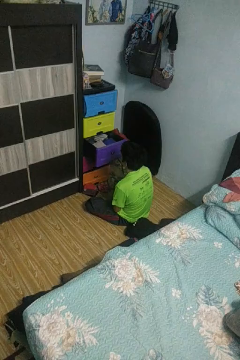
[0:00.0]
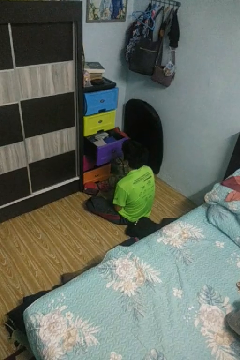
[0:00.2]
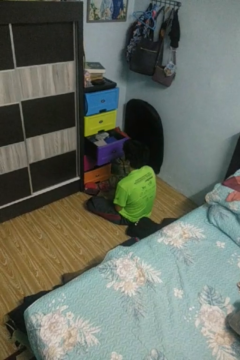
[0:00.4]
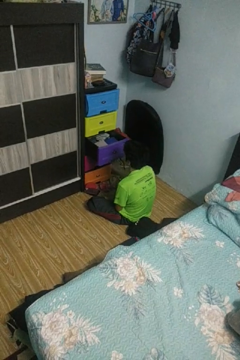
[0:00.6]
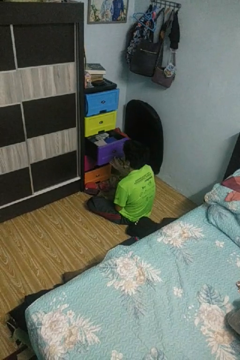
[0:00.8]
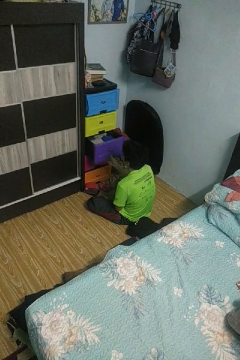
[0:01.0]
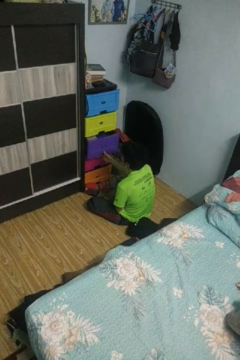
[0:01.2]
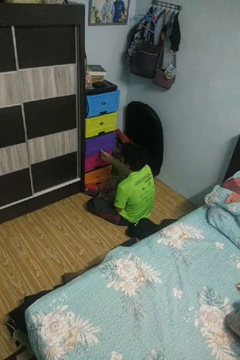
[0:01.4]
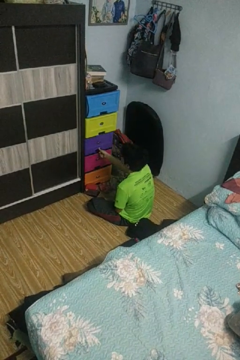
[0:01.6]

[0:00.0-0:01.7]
person closes dresser drawer

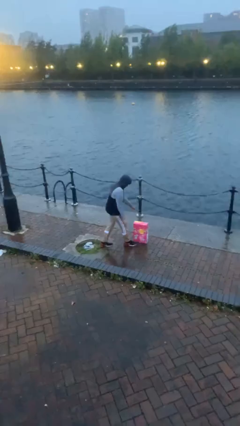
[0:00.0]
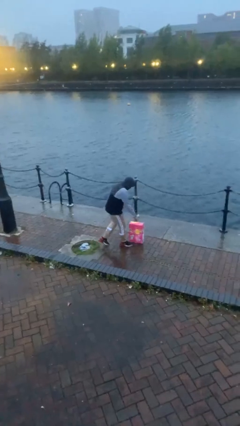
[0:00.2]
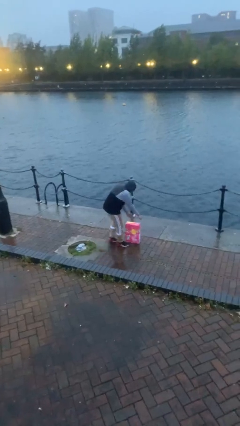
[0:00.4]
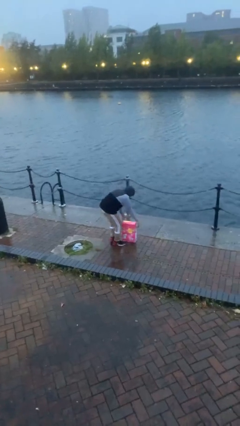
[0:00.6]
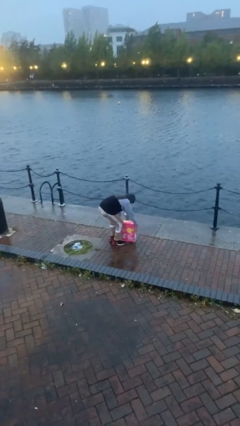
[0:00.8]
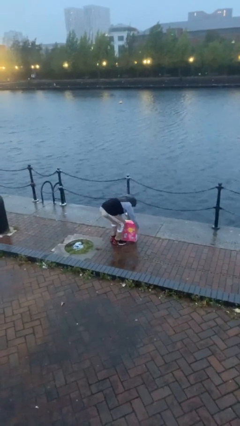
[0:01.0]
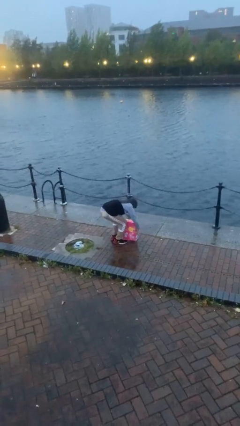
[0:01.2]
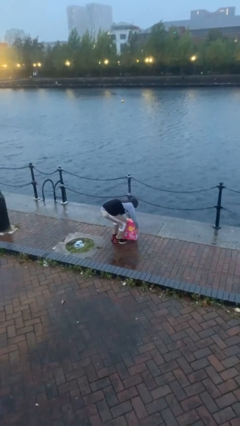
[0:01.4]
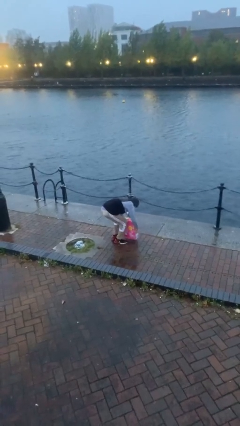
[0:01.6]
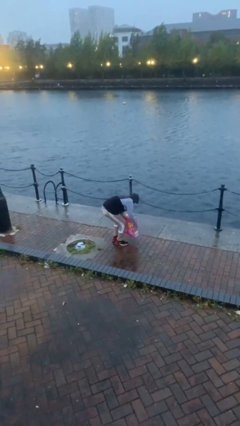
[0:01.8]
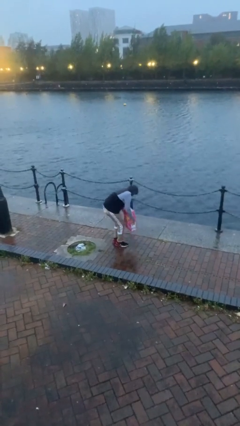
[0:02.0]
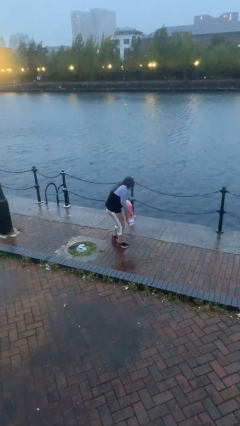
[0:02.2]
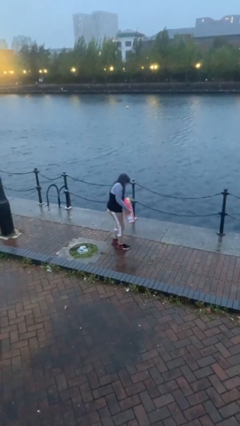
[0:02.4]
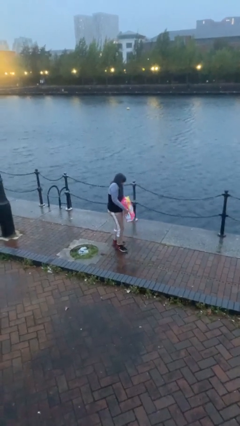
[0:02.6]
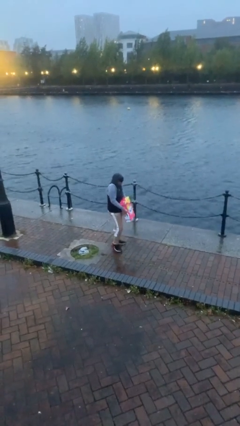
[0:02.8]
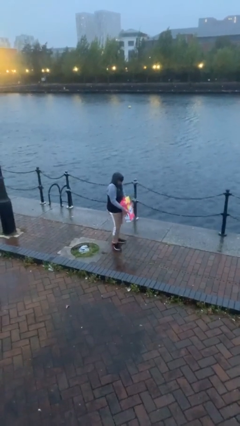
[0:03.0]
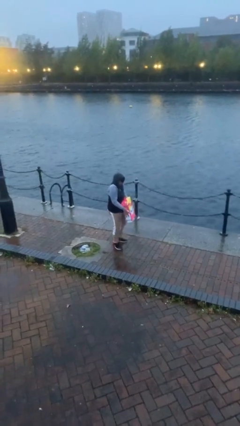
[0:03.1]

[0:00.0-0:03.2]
person picks up object from floor

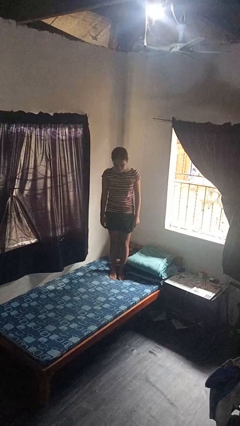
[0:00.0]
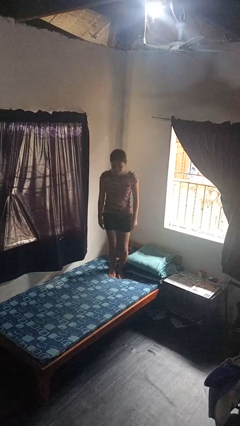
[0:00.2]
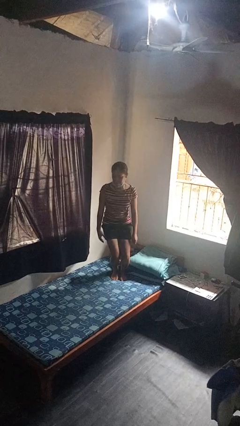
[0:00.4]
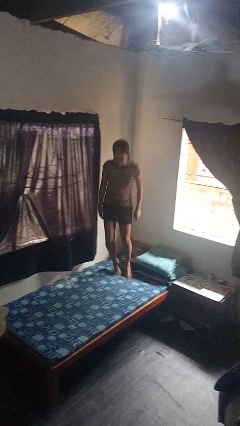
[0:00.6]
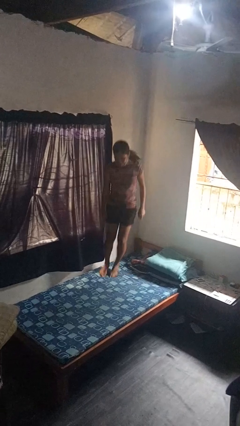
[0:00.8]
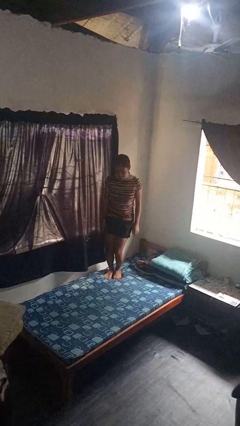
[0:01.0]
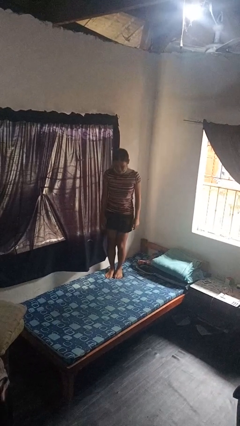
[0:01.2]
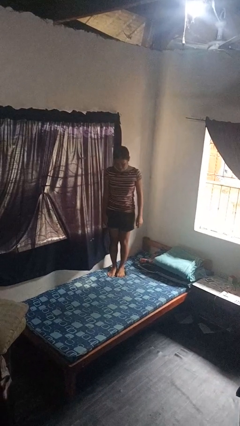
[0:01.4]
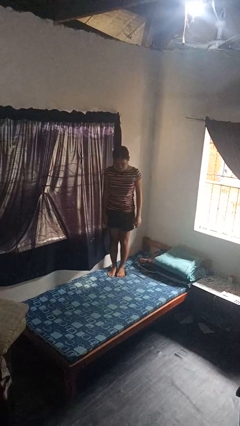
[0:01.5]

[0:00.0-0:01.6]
person jumps on bed

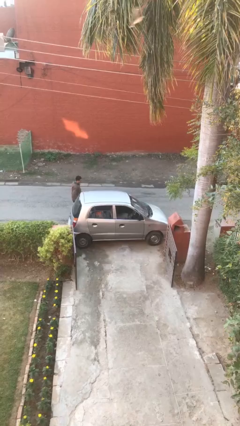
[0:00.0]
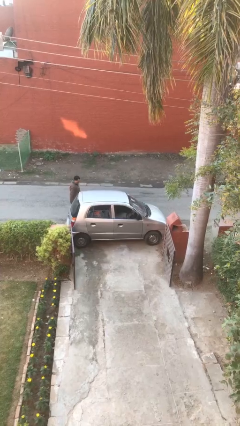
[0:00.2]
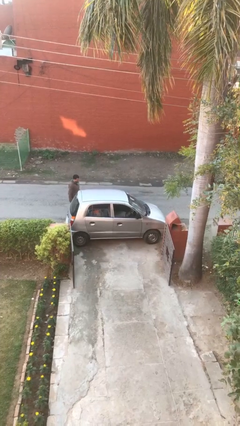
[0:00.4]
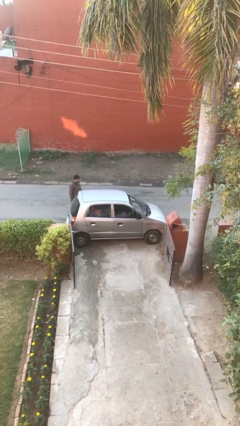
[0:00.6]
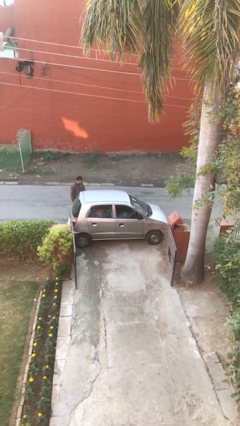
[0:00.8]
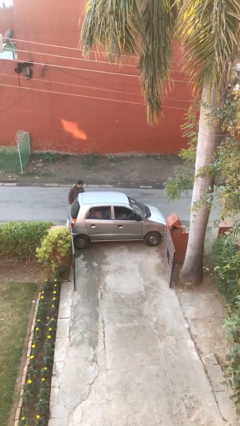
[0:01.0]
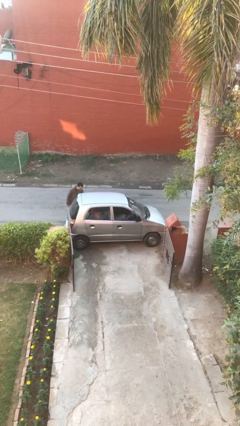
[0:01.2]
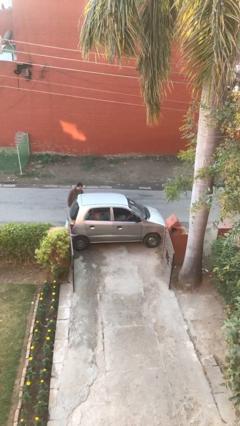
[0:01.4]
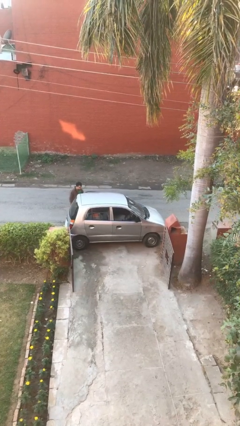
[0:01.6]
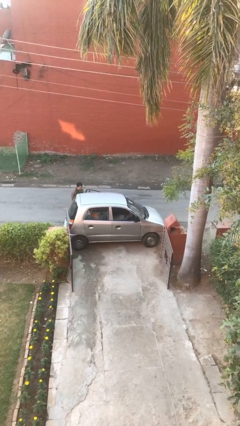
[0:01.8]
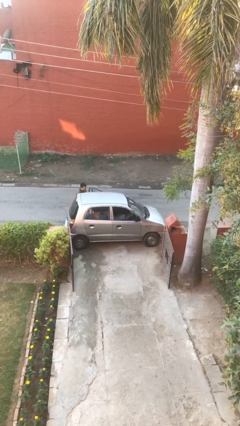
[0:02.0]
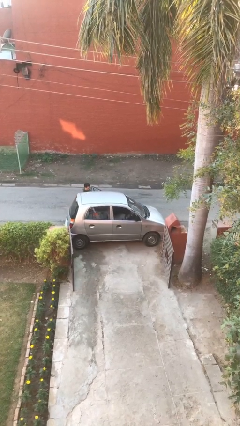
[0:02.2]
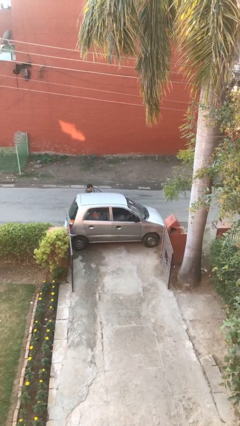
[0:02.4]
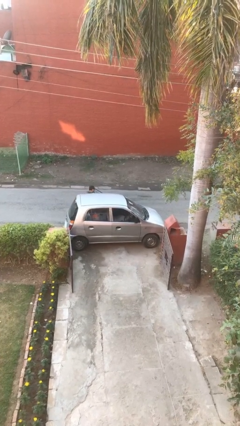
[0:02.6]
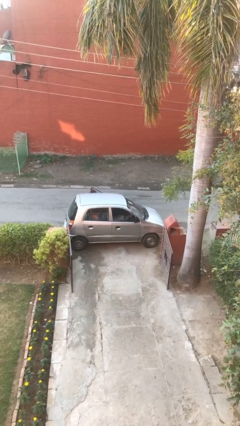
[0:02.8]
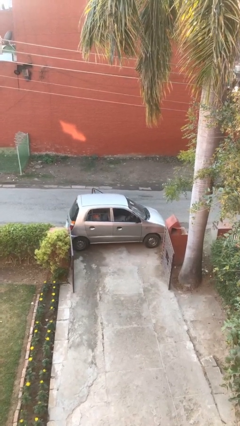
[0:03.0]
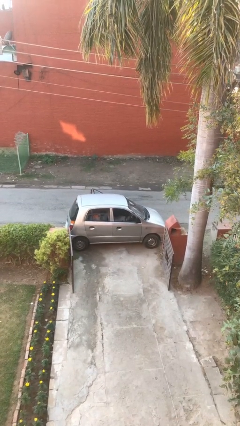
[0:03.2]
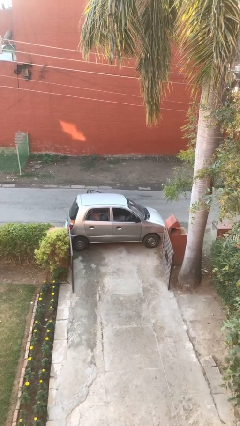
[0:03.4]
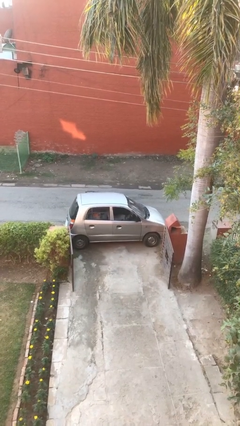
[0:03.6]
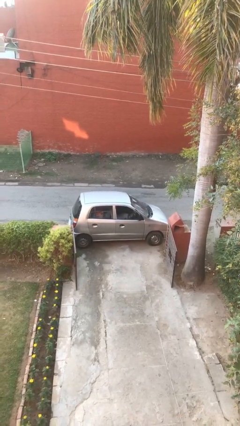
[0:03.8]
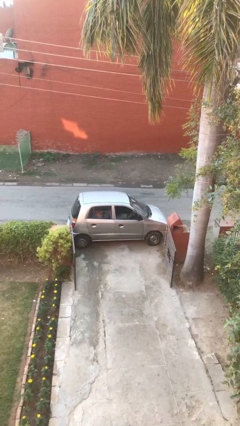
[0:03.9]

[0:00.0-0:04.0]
car picks up person

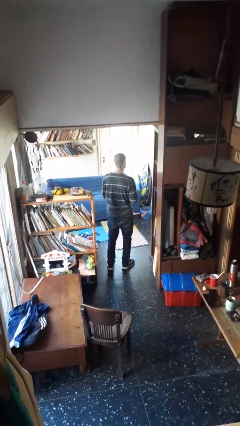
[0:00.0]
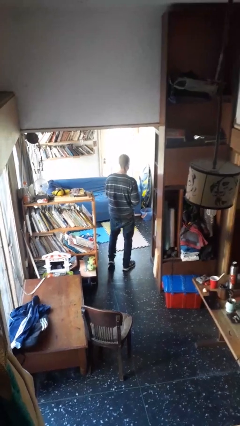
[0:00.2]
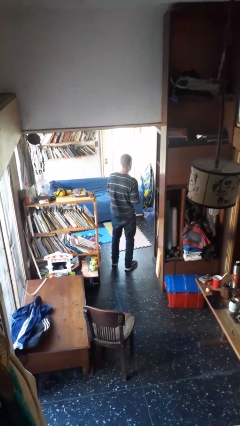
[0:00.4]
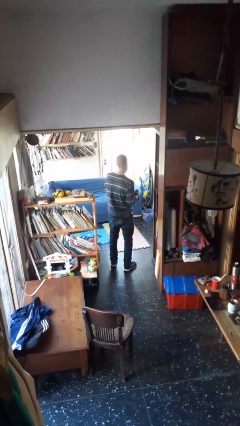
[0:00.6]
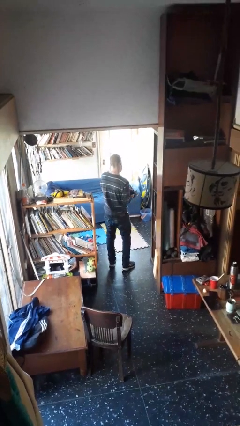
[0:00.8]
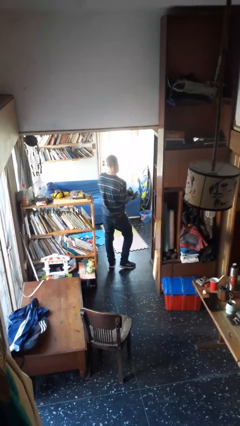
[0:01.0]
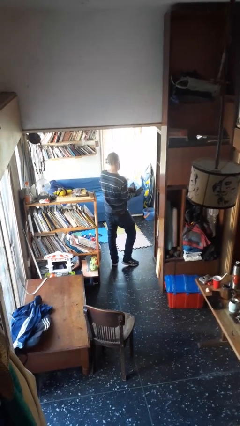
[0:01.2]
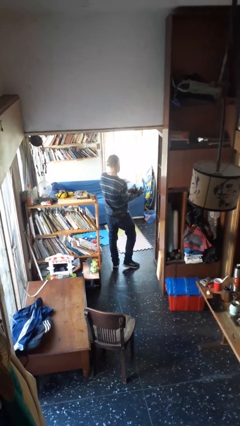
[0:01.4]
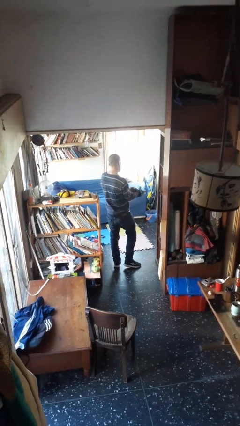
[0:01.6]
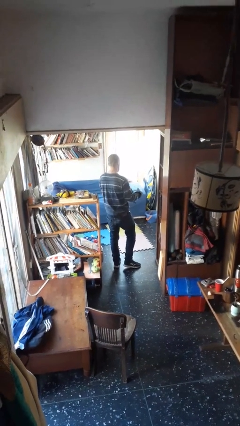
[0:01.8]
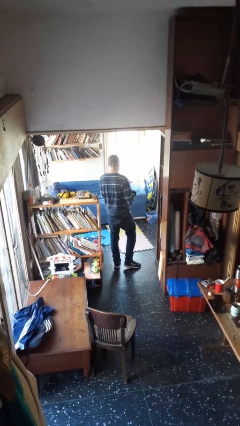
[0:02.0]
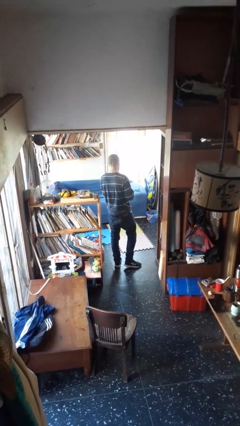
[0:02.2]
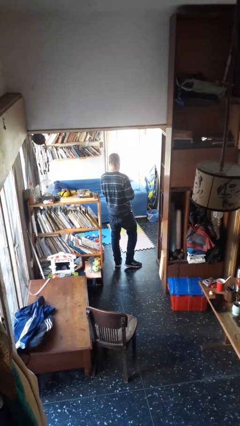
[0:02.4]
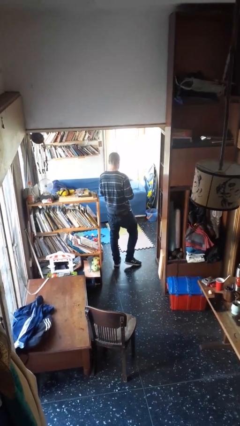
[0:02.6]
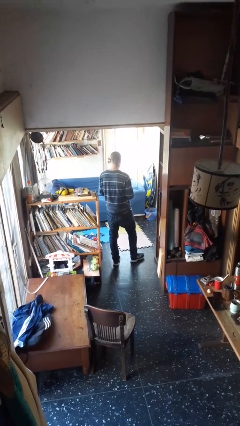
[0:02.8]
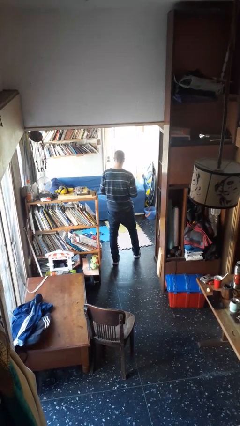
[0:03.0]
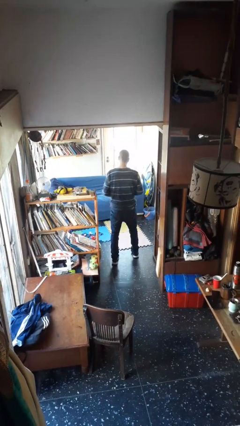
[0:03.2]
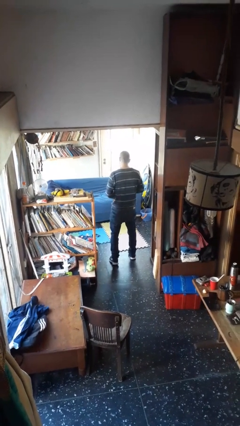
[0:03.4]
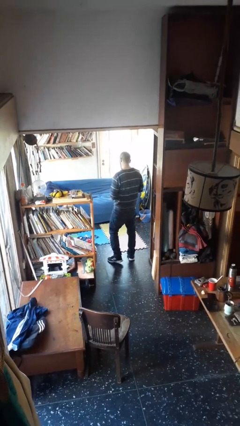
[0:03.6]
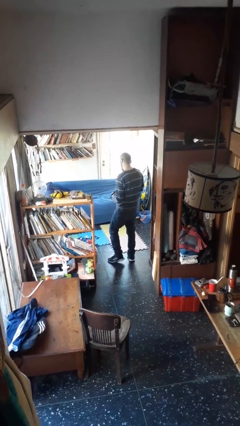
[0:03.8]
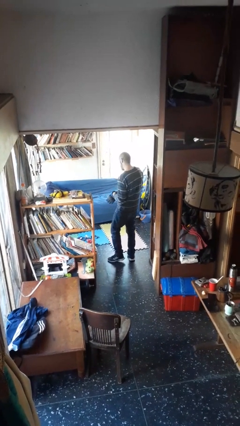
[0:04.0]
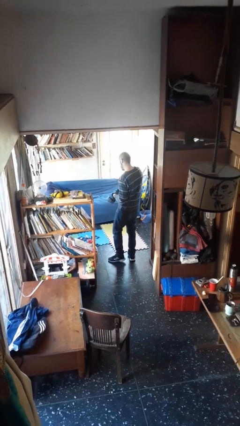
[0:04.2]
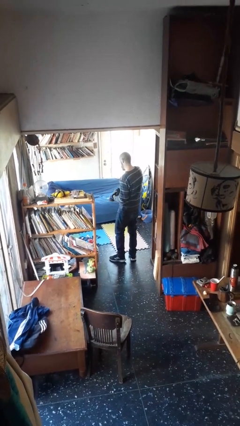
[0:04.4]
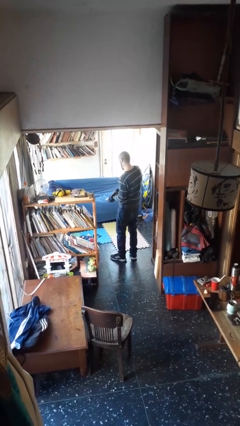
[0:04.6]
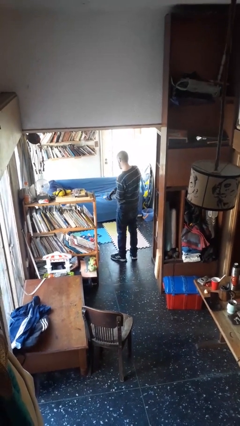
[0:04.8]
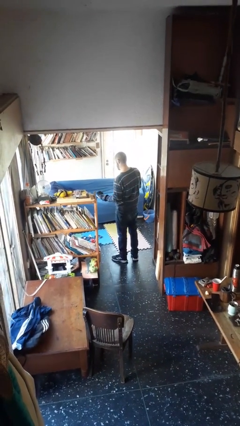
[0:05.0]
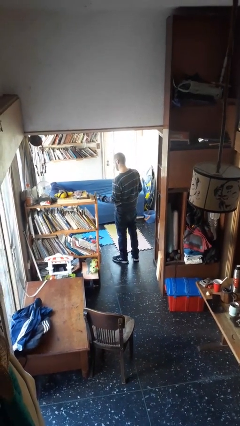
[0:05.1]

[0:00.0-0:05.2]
person puts on gloves

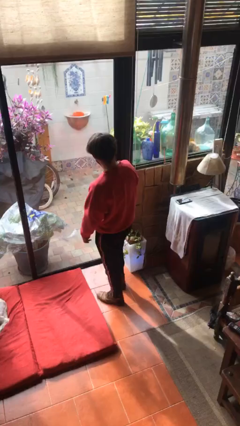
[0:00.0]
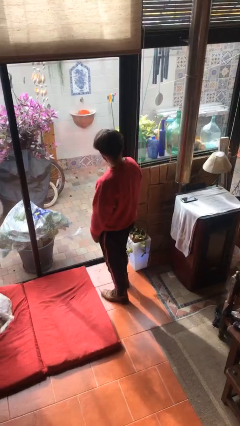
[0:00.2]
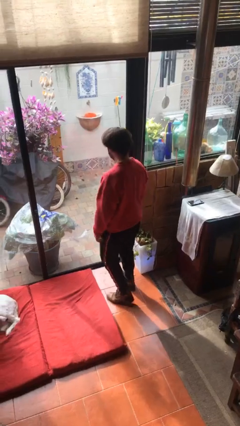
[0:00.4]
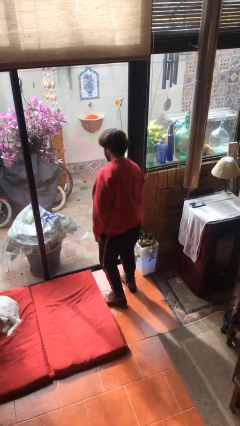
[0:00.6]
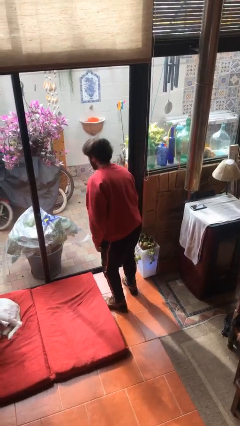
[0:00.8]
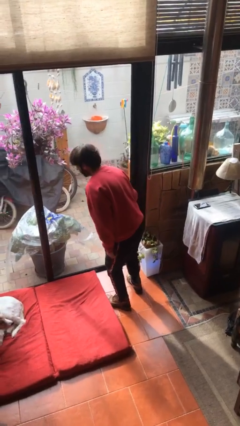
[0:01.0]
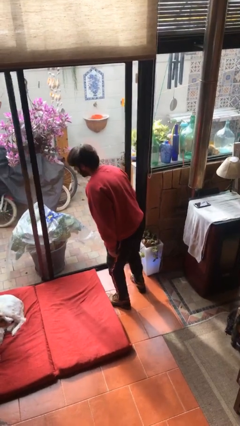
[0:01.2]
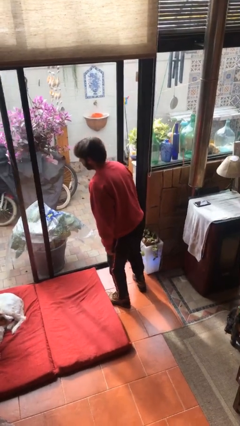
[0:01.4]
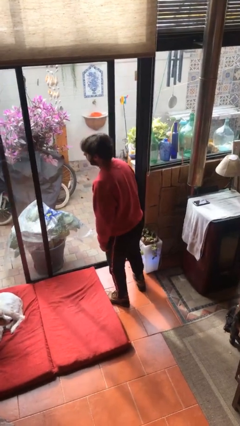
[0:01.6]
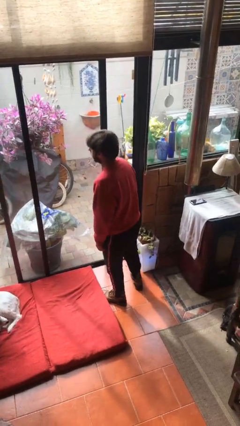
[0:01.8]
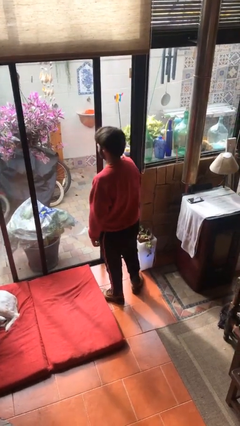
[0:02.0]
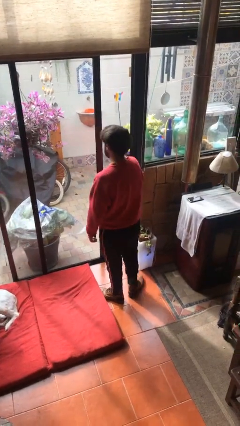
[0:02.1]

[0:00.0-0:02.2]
person opens sliding door
